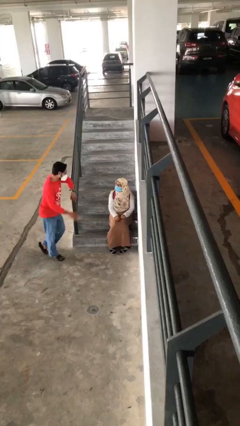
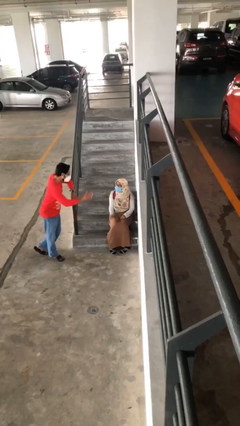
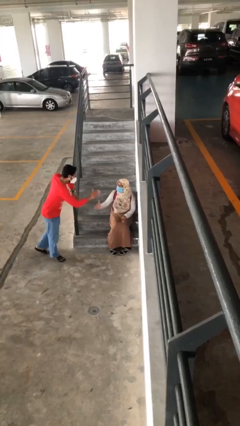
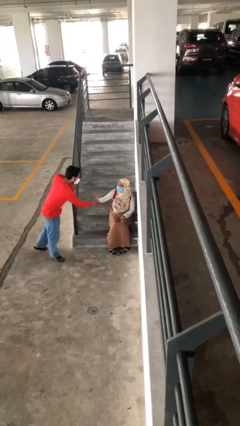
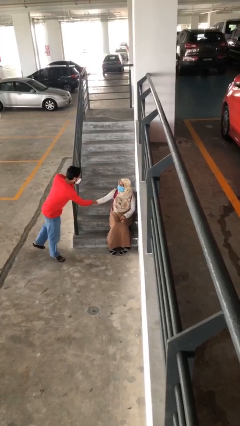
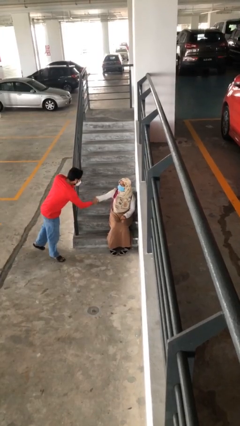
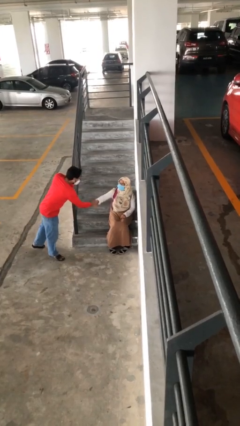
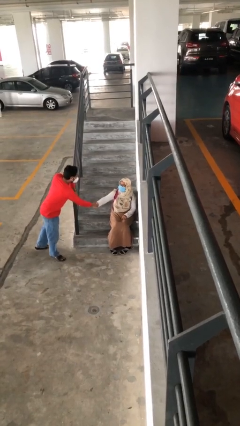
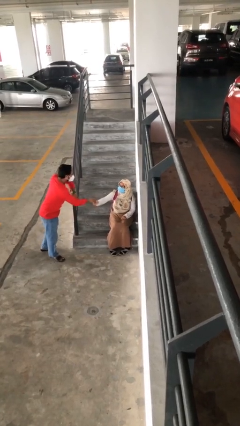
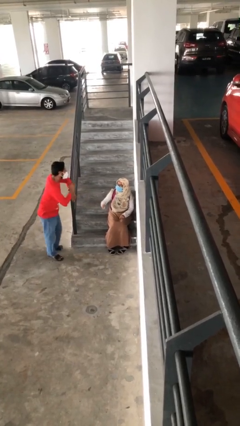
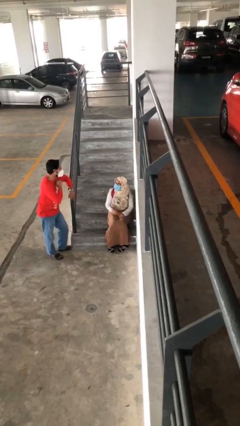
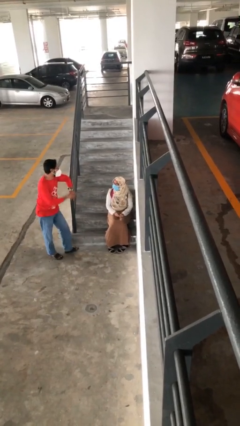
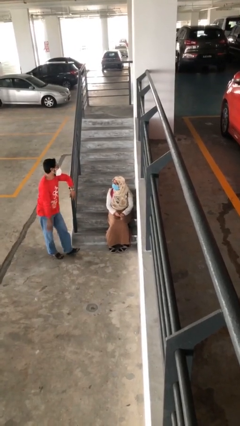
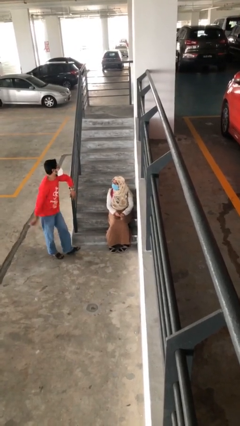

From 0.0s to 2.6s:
person shakes hand

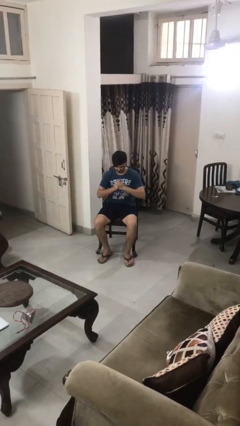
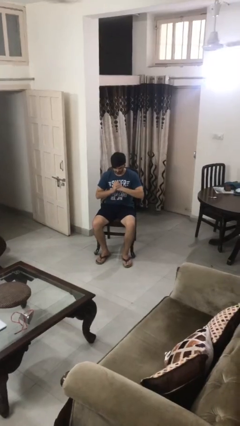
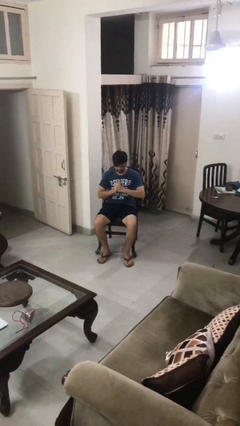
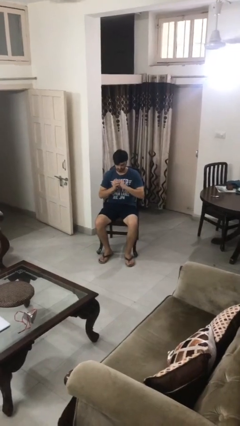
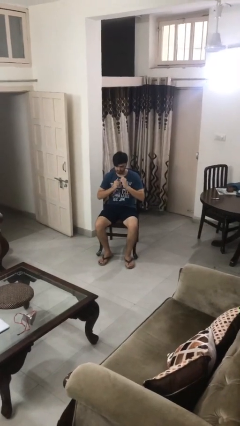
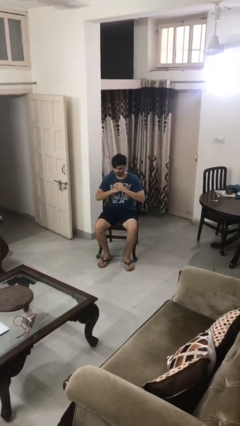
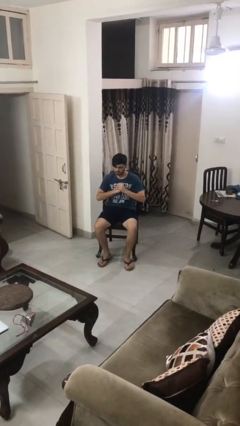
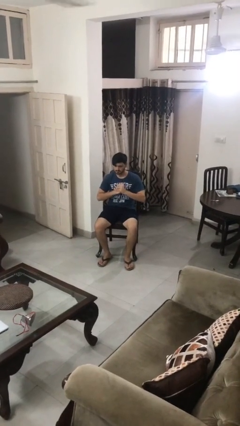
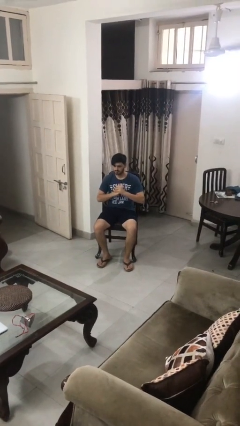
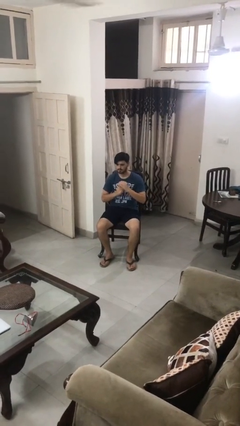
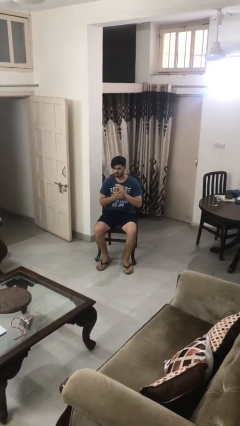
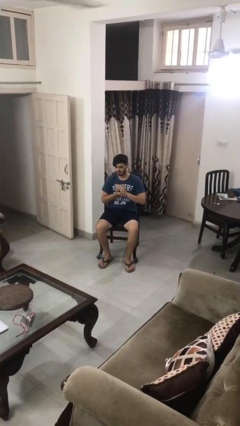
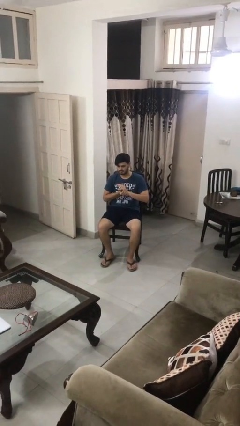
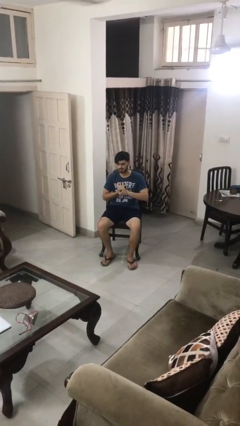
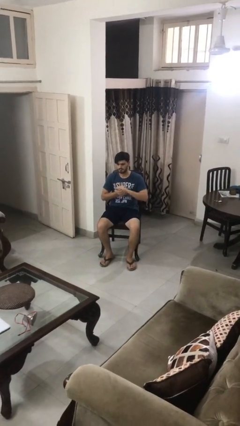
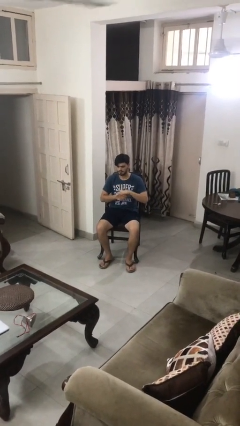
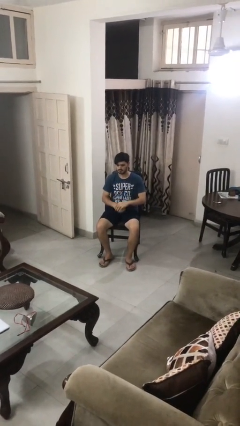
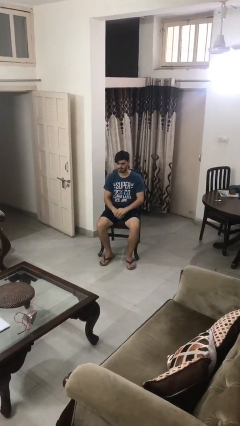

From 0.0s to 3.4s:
person cracks knuckles

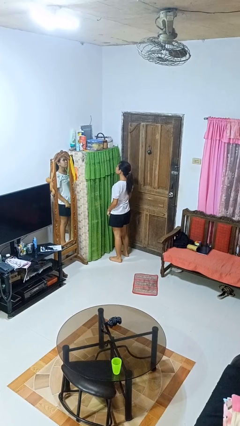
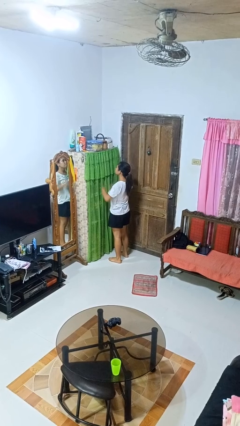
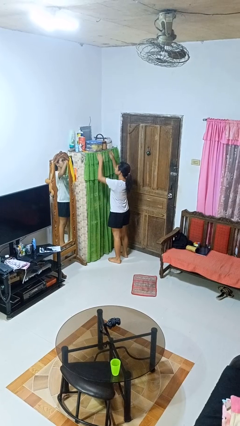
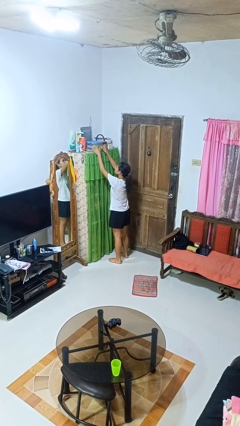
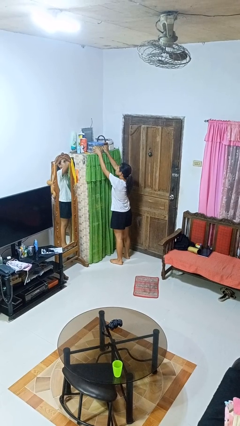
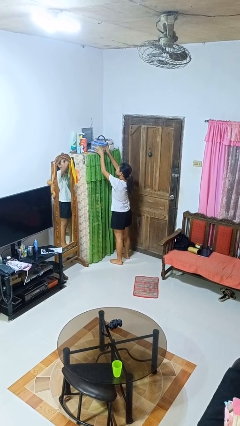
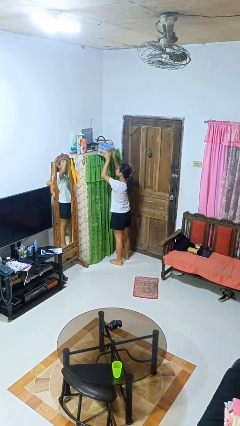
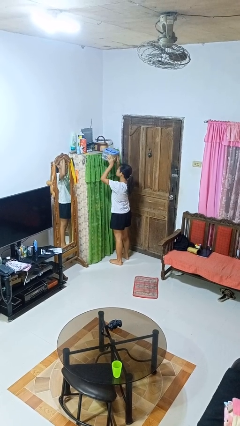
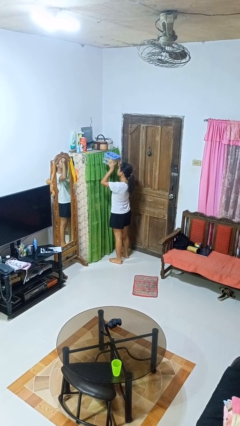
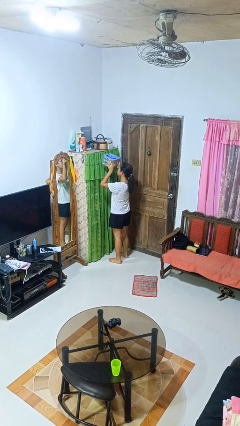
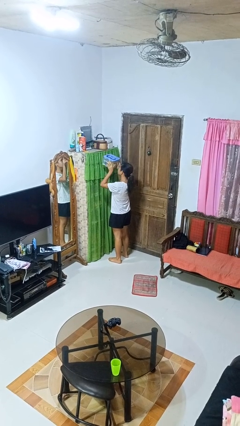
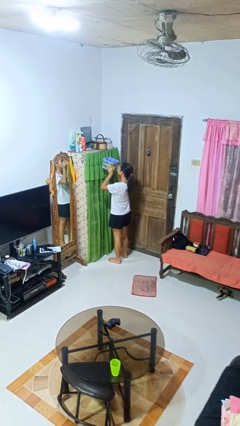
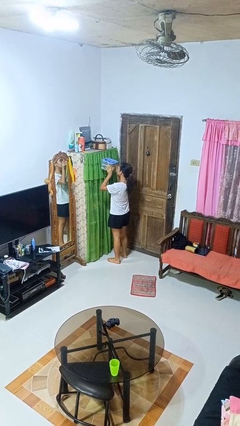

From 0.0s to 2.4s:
person picks up object from shelf

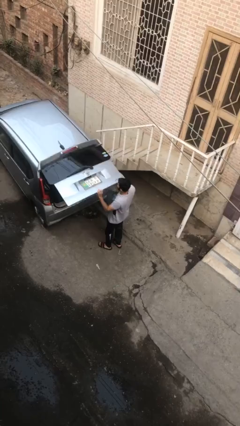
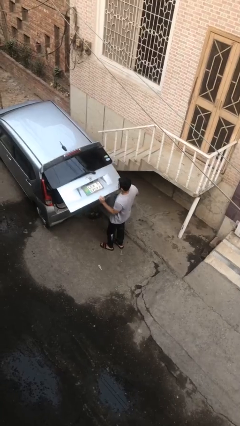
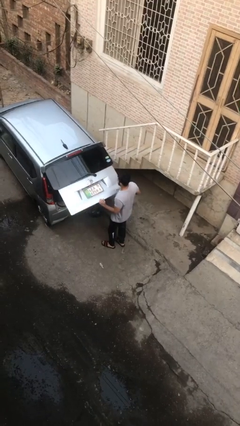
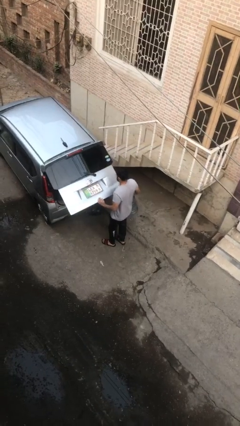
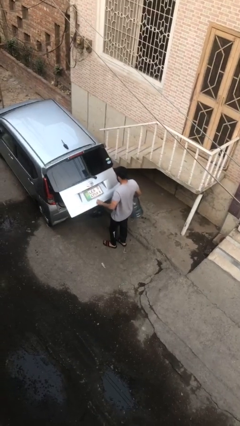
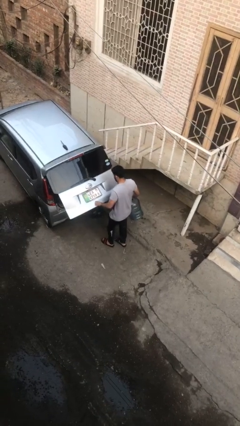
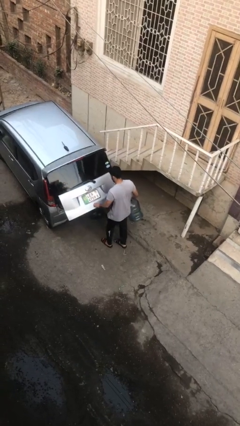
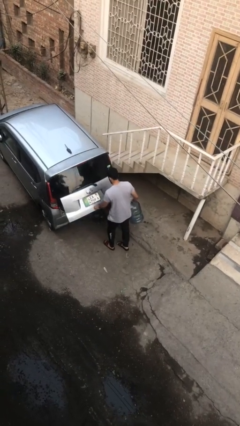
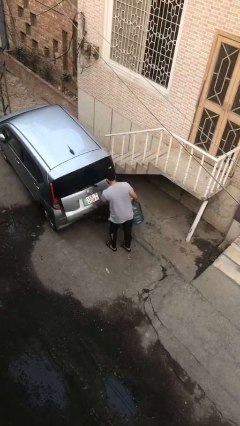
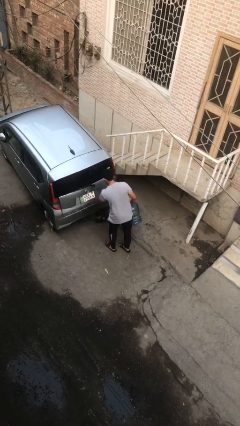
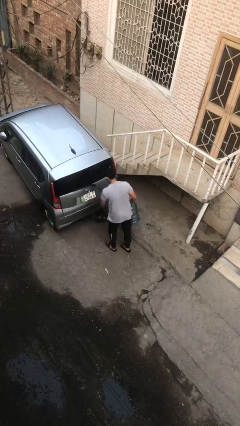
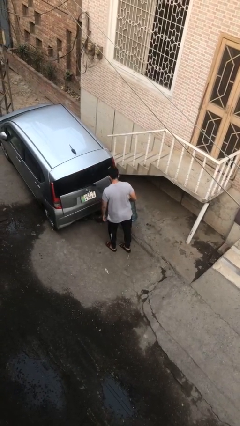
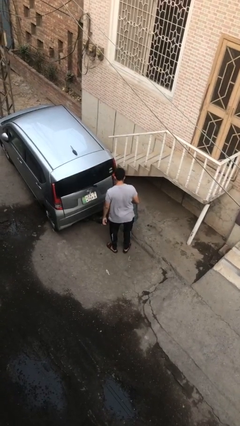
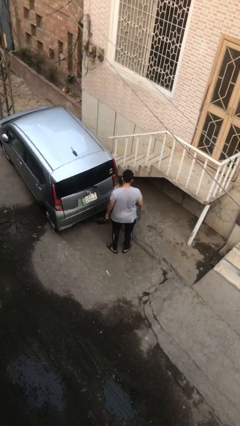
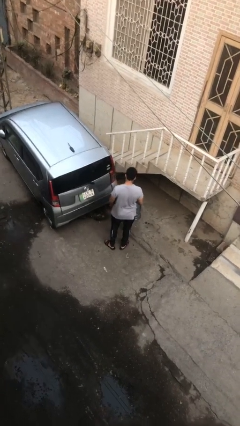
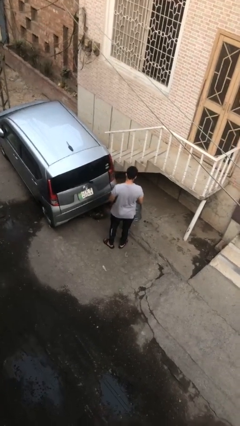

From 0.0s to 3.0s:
person closes car trunk

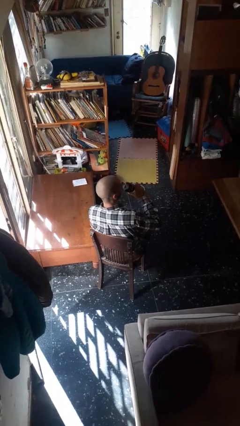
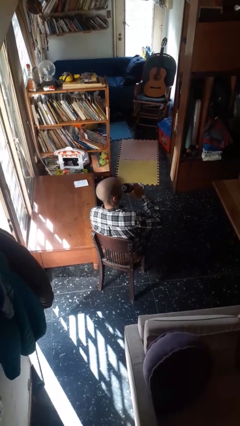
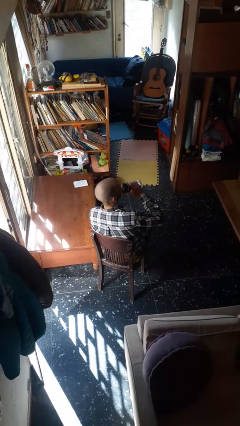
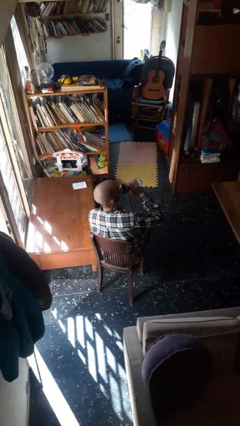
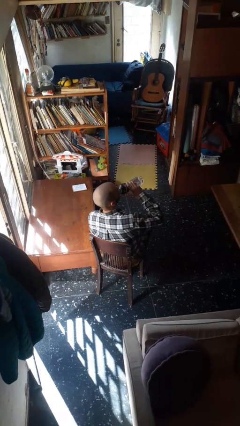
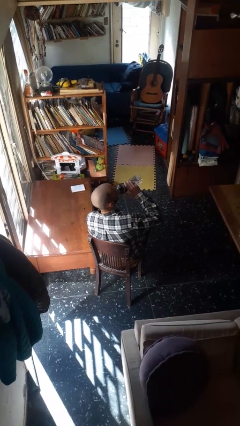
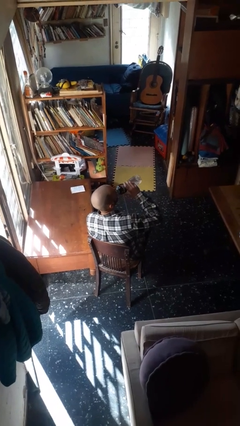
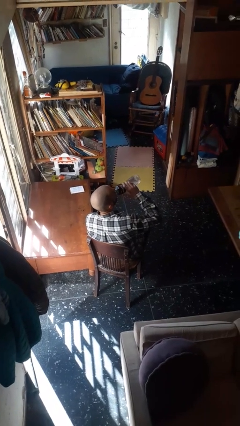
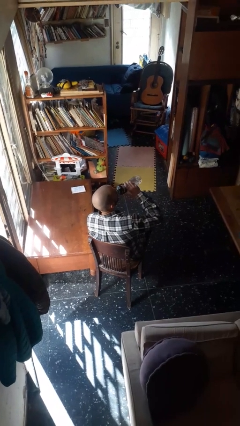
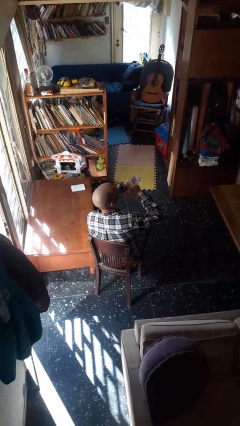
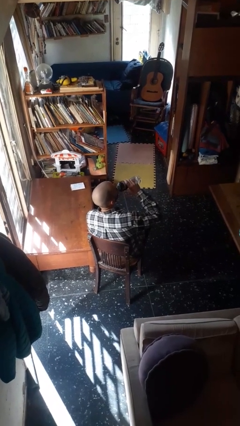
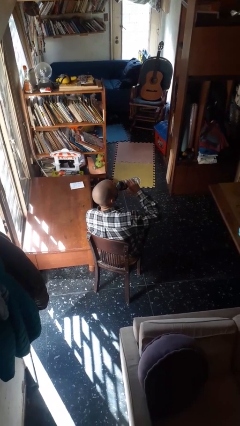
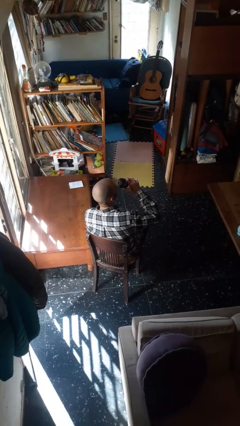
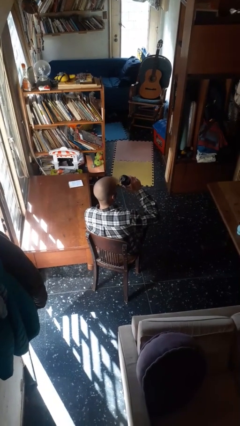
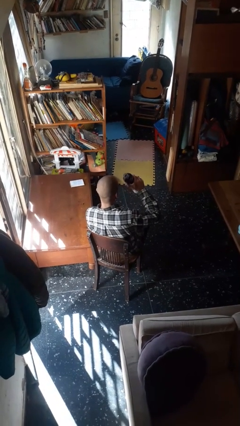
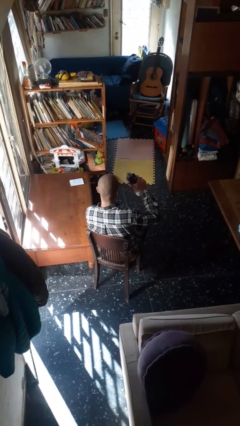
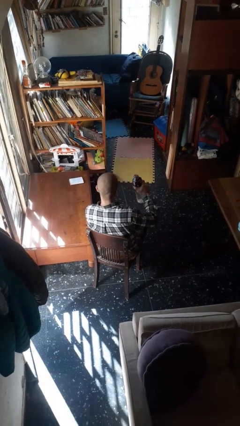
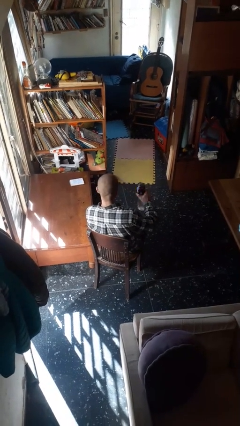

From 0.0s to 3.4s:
person drinks from bottle

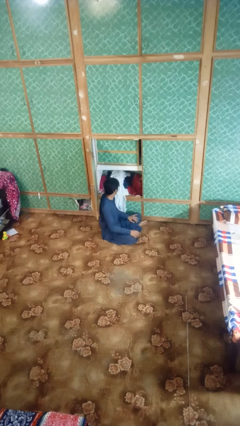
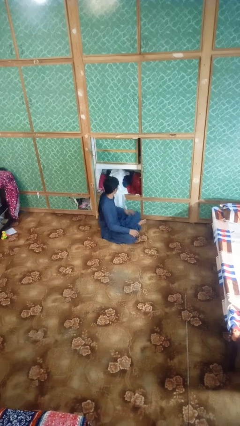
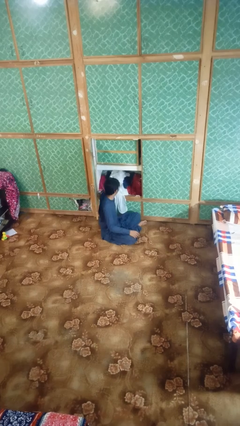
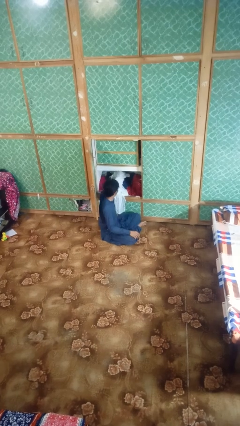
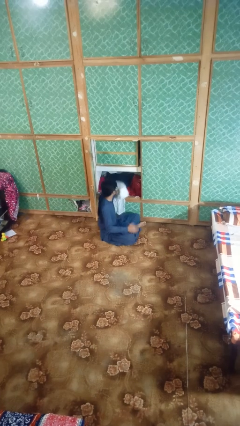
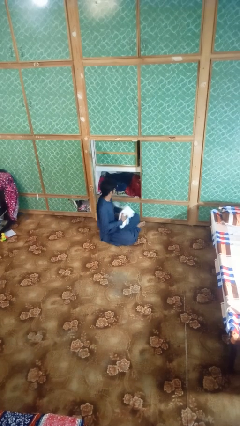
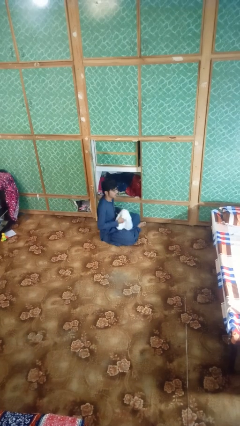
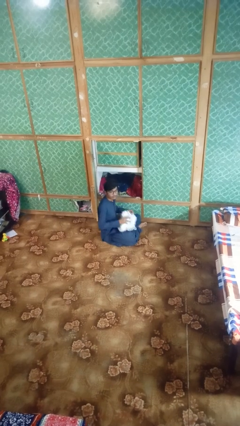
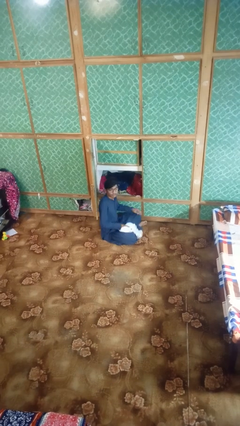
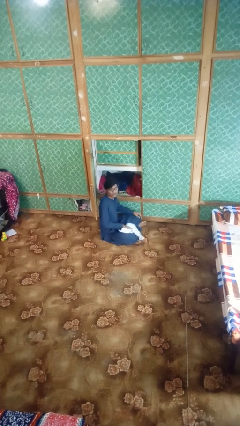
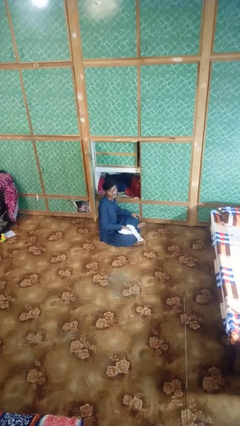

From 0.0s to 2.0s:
person takes clothes from dresser
